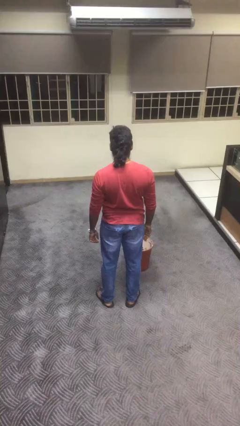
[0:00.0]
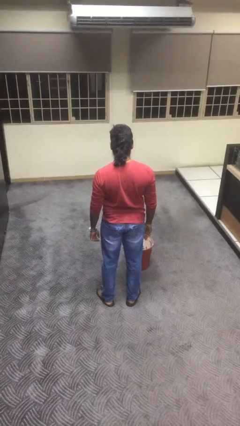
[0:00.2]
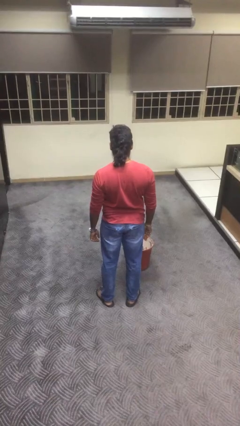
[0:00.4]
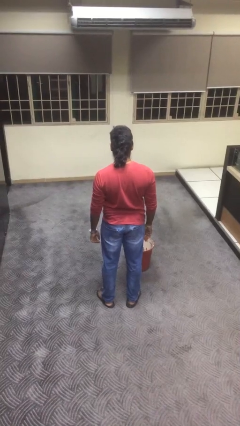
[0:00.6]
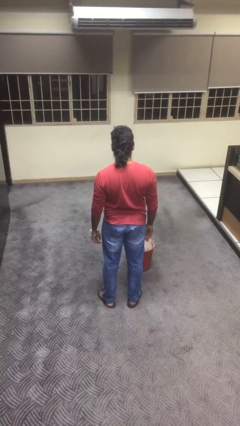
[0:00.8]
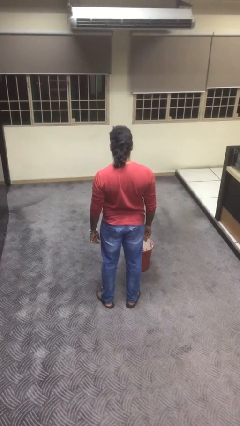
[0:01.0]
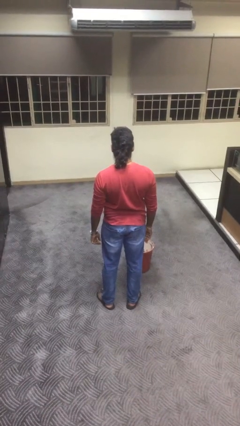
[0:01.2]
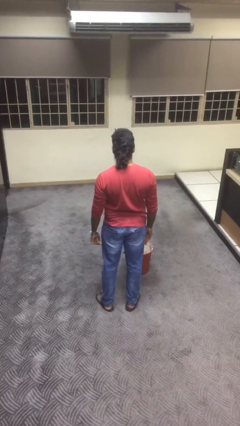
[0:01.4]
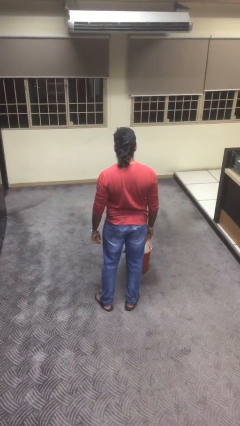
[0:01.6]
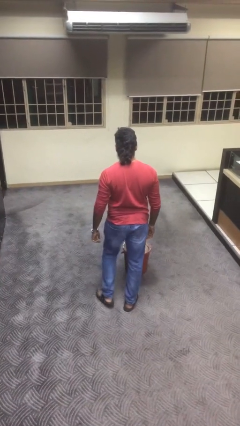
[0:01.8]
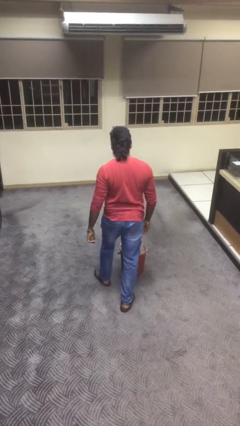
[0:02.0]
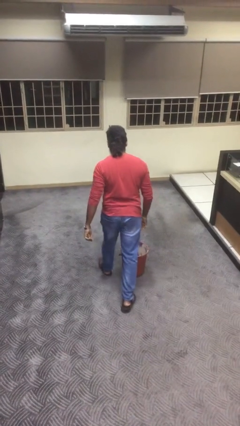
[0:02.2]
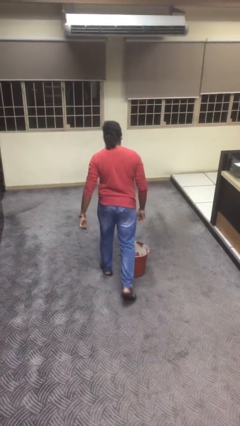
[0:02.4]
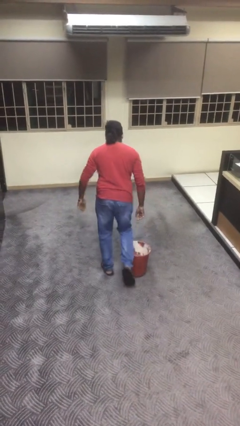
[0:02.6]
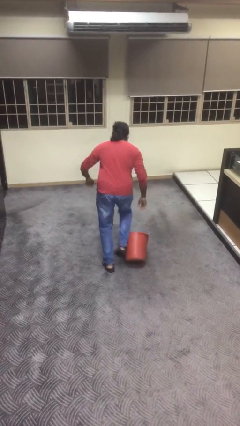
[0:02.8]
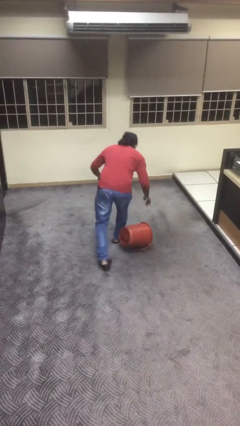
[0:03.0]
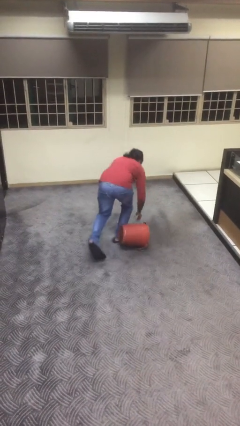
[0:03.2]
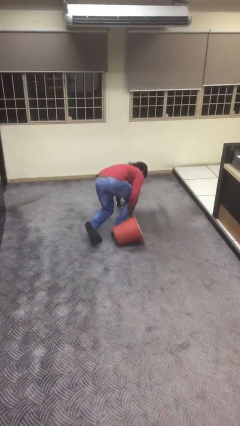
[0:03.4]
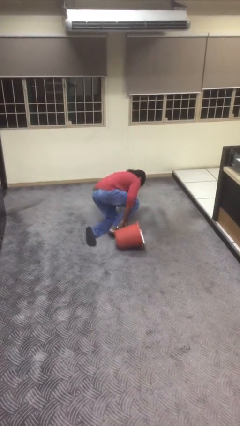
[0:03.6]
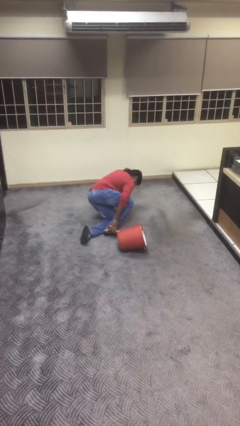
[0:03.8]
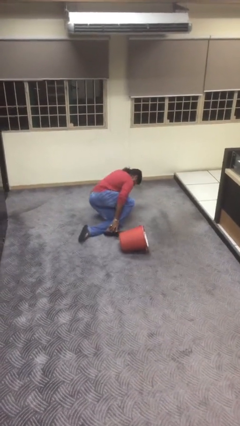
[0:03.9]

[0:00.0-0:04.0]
person trips on object on floor

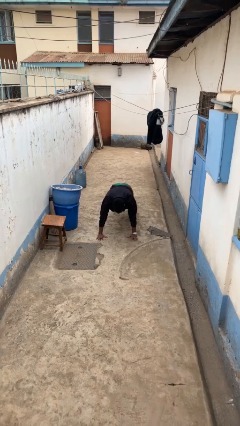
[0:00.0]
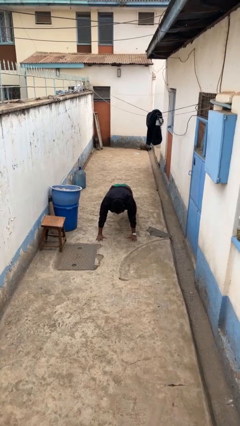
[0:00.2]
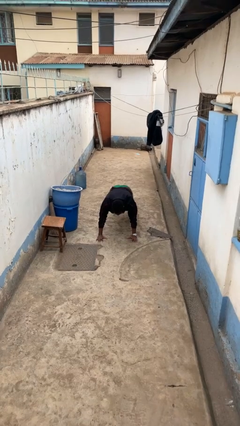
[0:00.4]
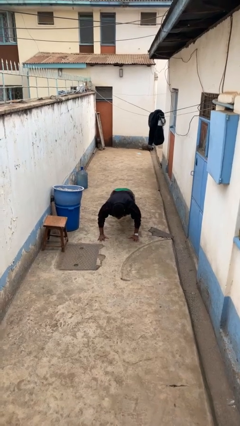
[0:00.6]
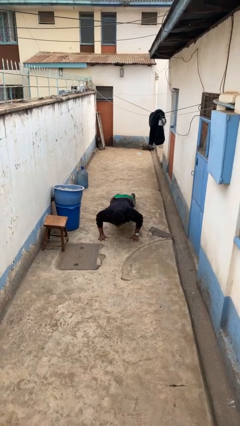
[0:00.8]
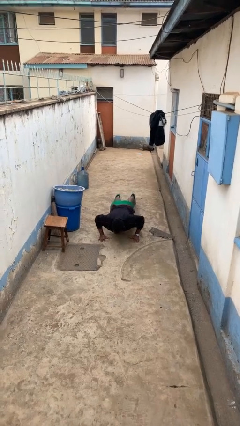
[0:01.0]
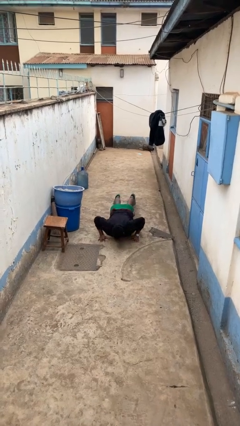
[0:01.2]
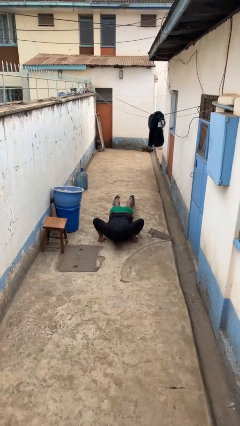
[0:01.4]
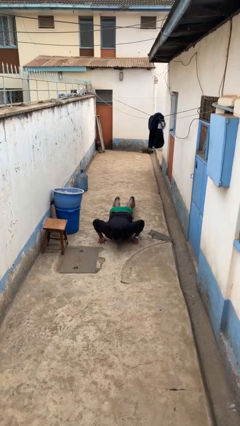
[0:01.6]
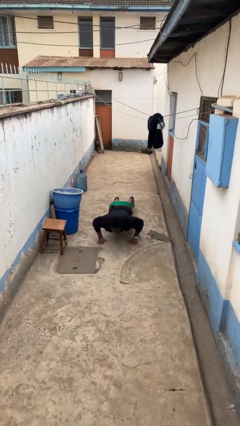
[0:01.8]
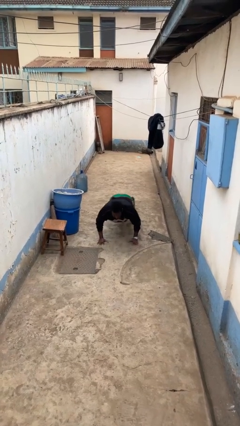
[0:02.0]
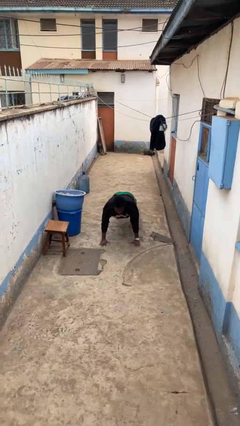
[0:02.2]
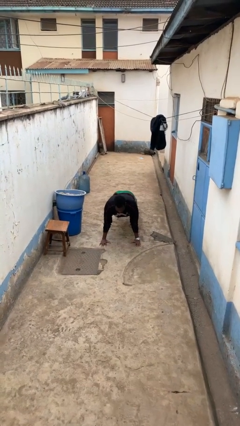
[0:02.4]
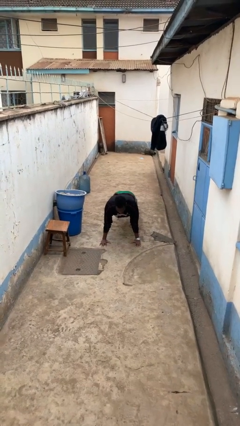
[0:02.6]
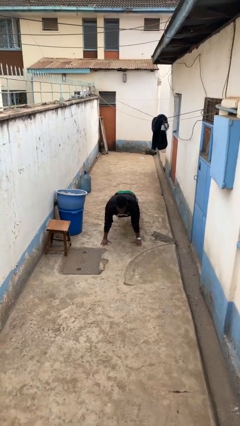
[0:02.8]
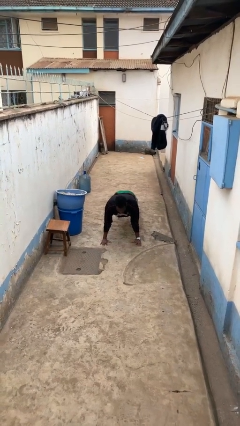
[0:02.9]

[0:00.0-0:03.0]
person exercises with pushup

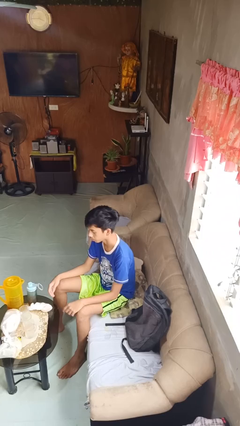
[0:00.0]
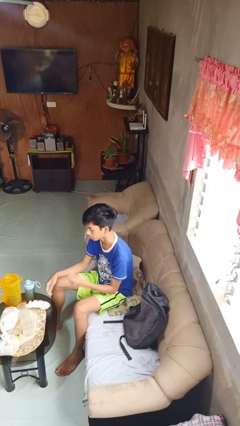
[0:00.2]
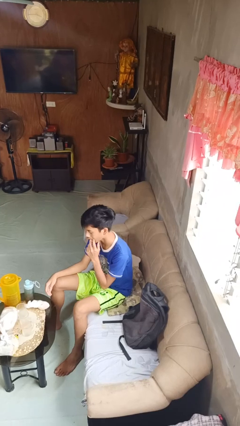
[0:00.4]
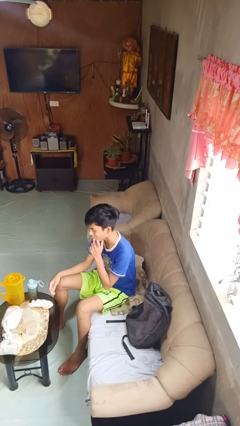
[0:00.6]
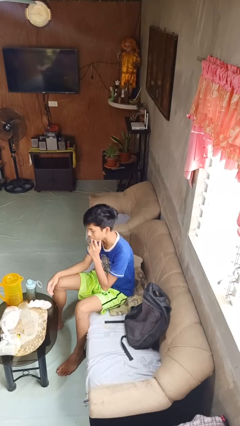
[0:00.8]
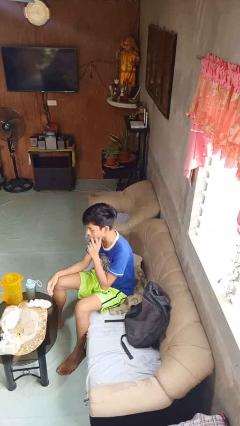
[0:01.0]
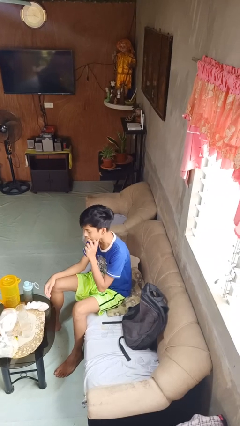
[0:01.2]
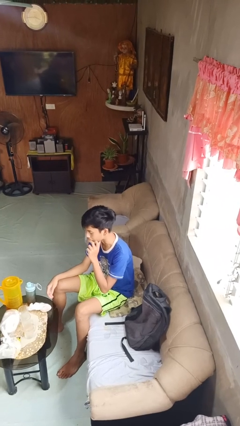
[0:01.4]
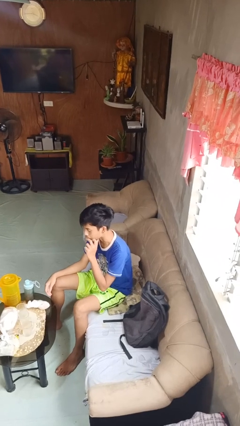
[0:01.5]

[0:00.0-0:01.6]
person licks fingers

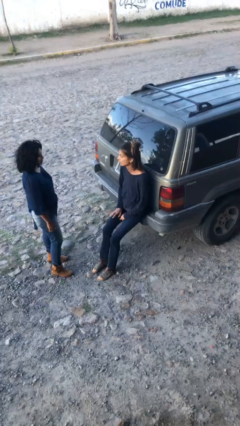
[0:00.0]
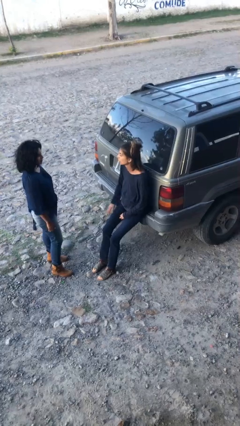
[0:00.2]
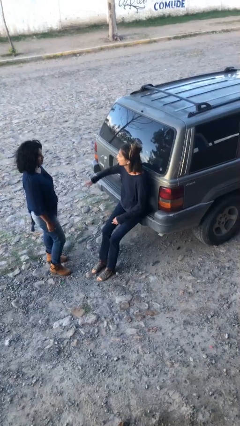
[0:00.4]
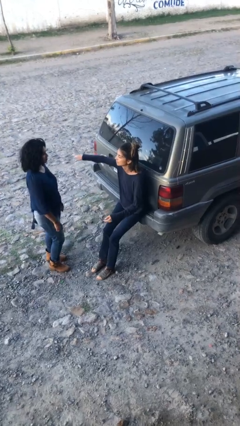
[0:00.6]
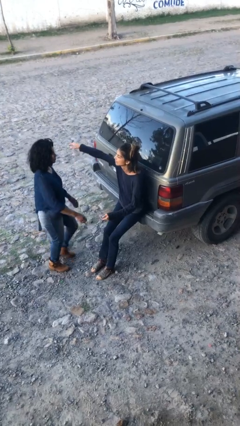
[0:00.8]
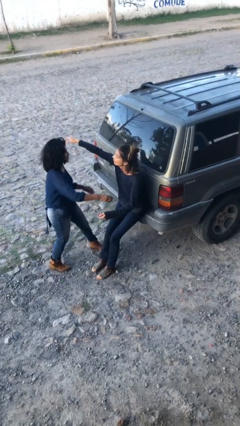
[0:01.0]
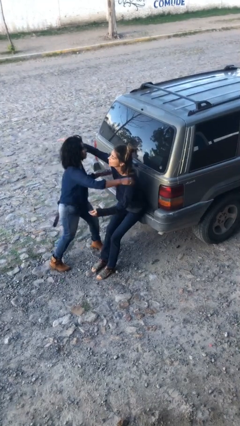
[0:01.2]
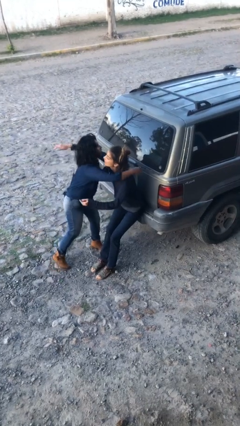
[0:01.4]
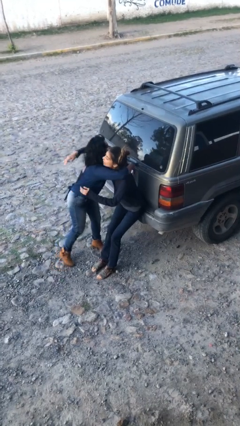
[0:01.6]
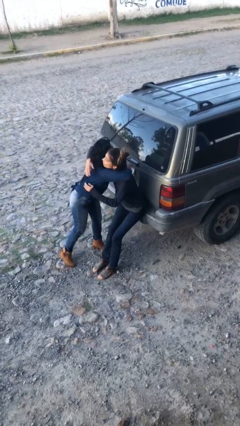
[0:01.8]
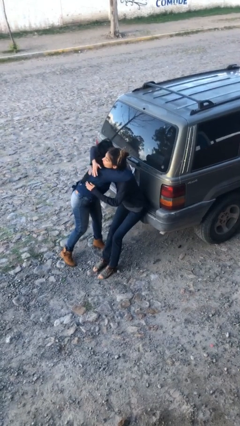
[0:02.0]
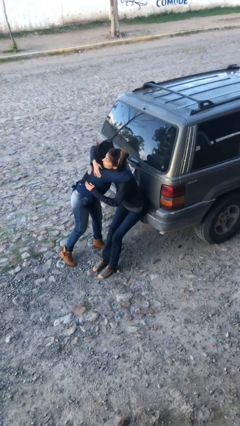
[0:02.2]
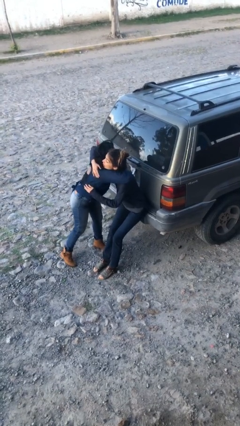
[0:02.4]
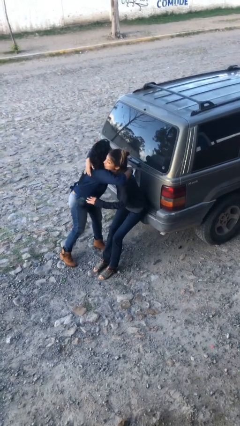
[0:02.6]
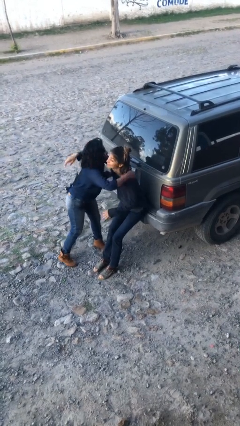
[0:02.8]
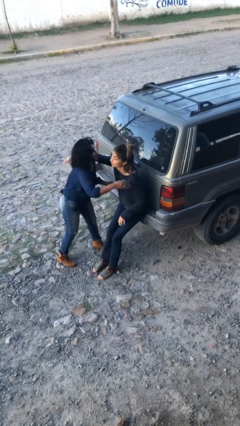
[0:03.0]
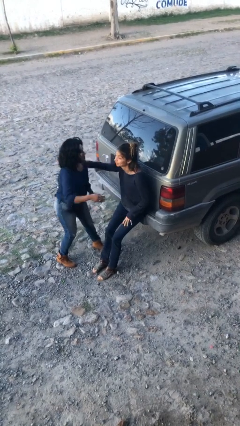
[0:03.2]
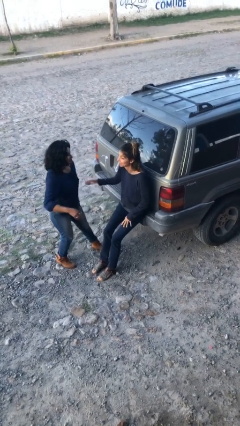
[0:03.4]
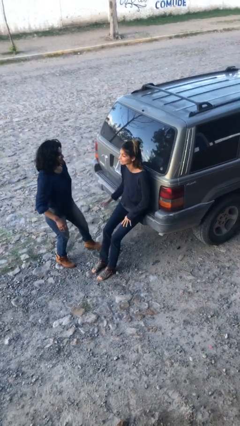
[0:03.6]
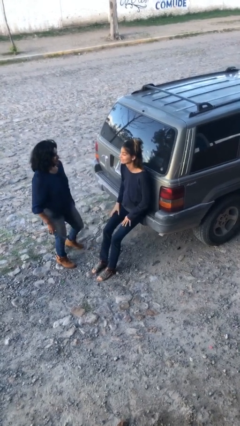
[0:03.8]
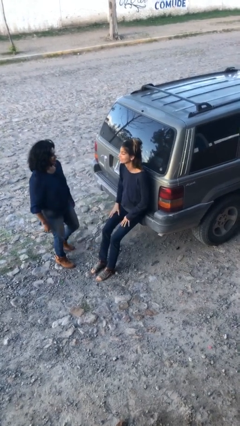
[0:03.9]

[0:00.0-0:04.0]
person embraces person

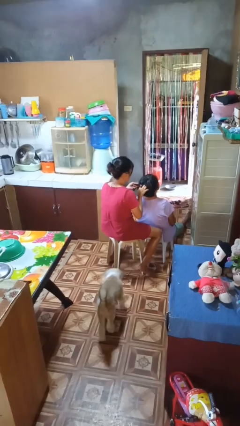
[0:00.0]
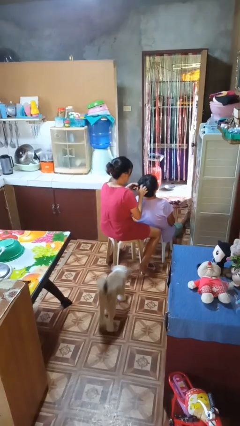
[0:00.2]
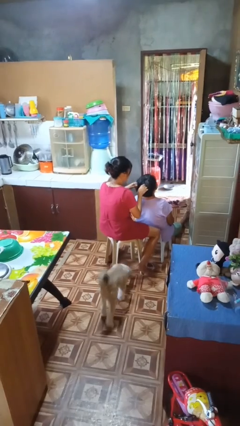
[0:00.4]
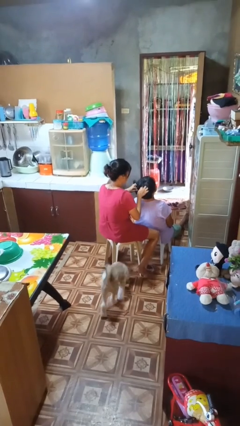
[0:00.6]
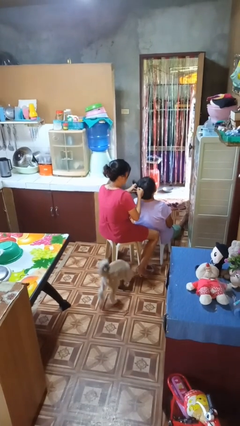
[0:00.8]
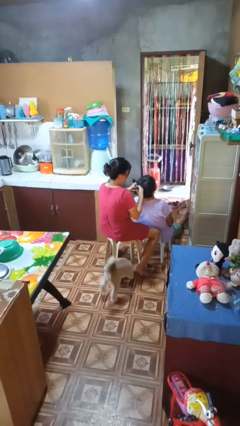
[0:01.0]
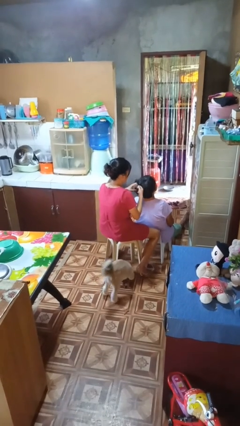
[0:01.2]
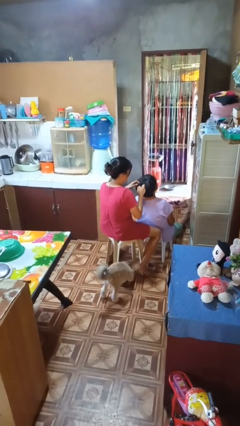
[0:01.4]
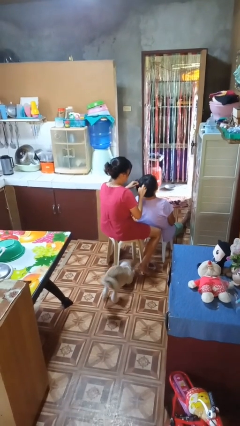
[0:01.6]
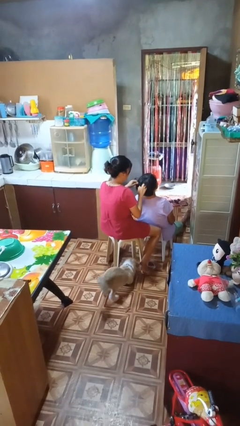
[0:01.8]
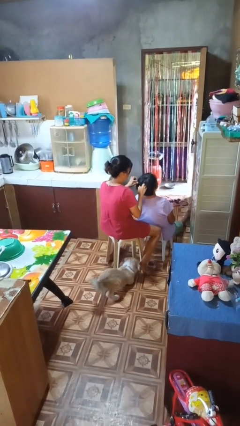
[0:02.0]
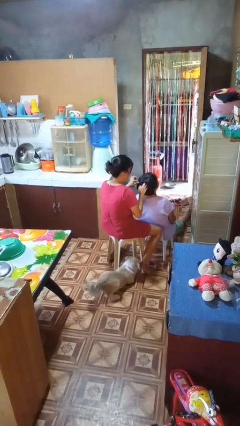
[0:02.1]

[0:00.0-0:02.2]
person braids hair of person

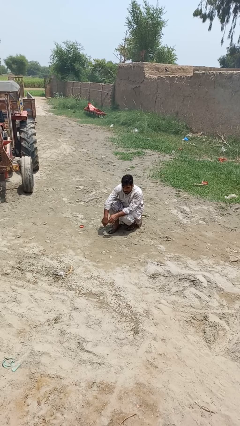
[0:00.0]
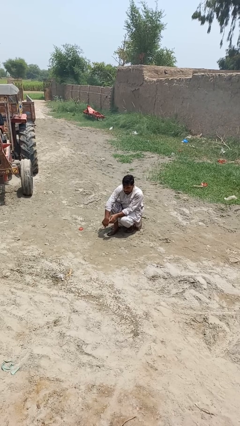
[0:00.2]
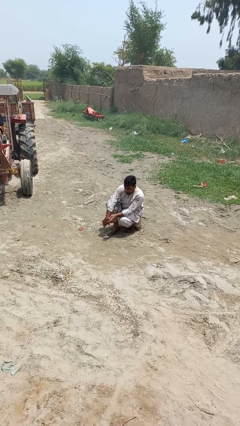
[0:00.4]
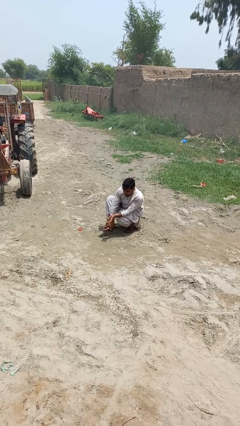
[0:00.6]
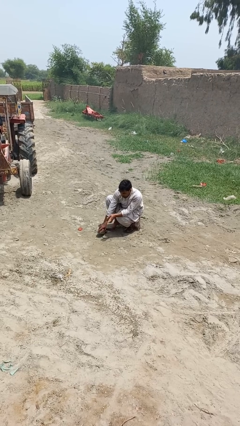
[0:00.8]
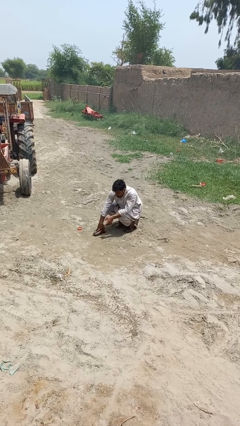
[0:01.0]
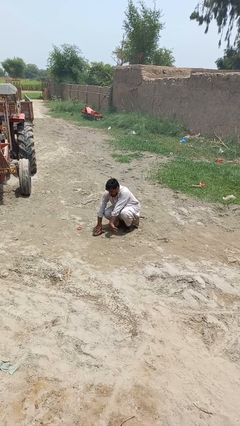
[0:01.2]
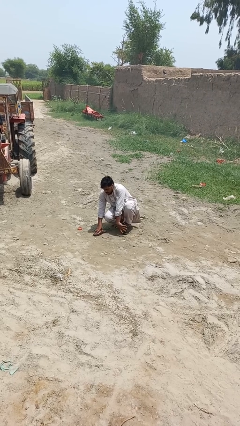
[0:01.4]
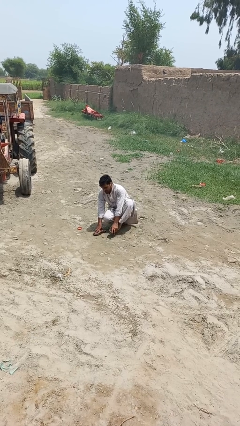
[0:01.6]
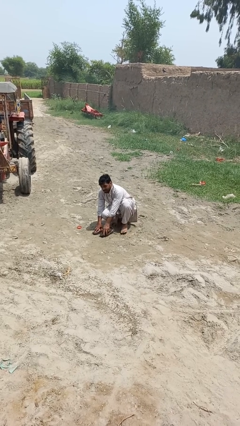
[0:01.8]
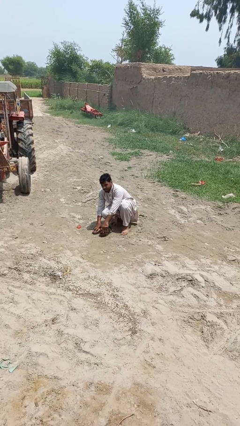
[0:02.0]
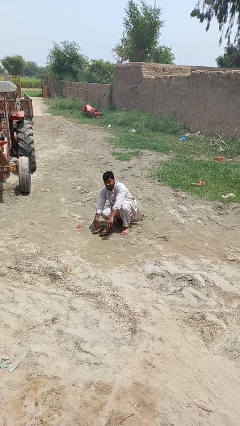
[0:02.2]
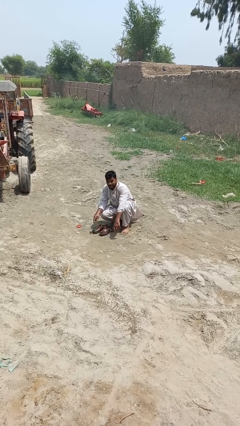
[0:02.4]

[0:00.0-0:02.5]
person takes off shoes

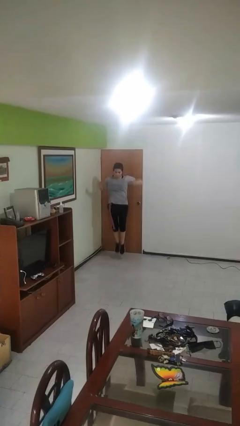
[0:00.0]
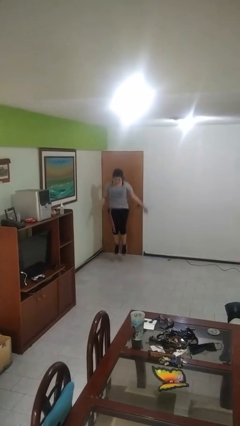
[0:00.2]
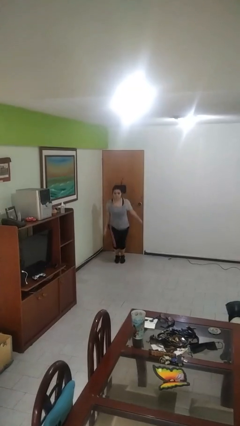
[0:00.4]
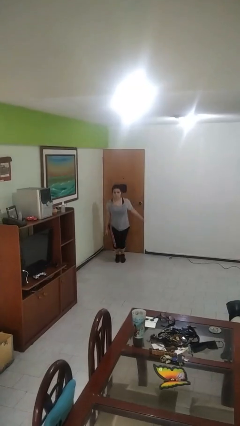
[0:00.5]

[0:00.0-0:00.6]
person jumps
